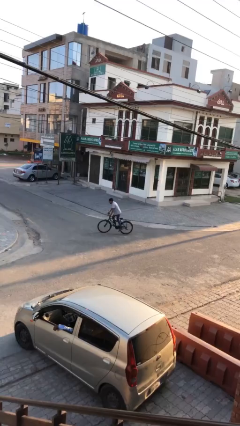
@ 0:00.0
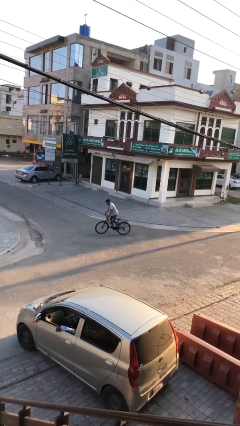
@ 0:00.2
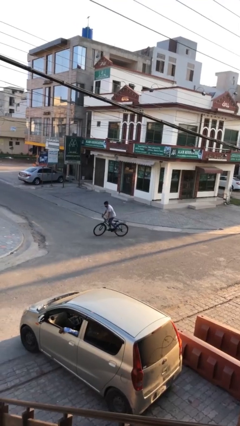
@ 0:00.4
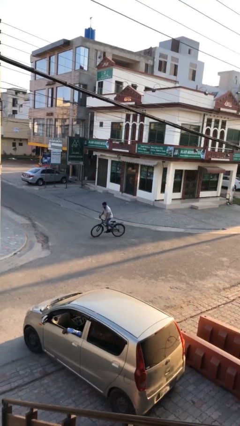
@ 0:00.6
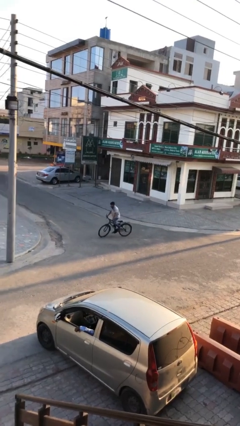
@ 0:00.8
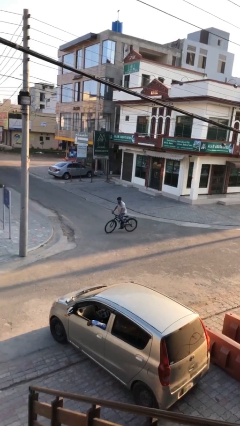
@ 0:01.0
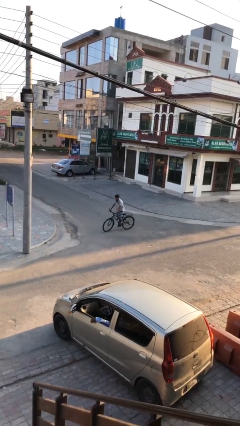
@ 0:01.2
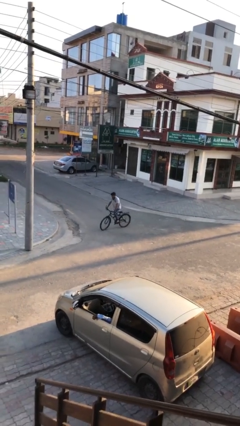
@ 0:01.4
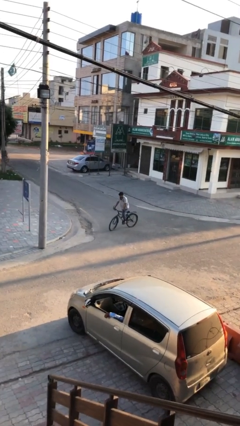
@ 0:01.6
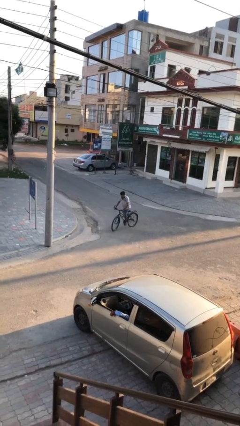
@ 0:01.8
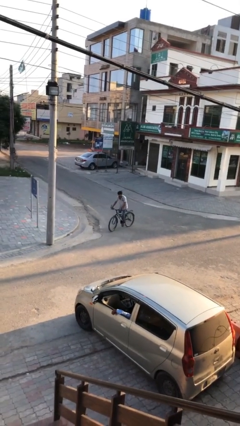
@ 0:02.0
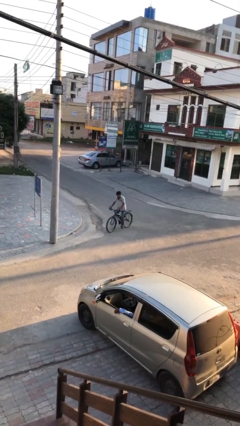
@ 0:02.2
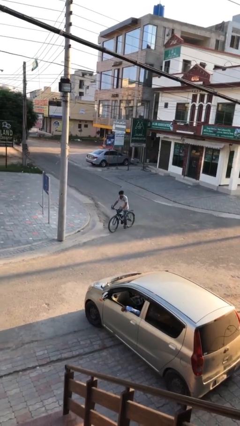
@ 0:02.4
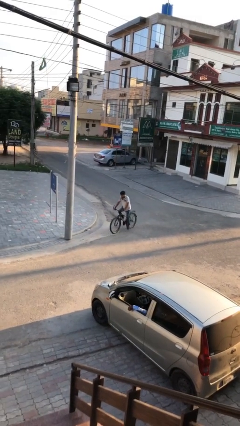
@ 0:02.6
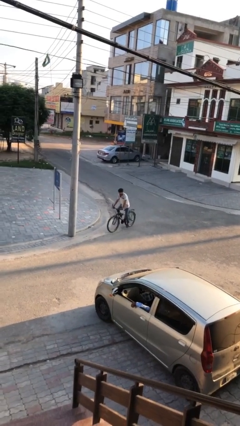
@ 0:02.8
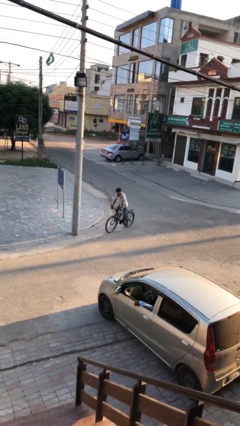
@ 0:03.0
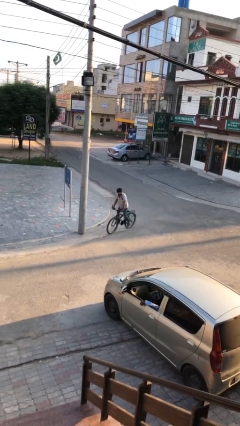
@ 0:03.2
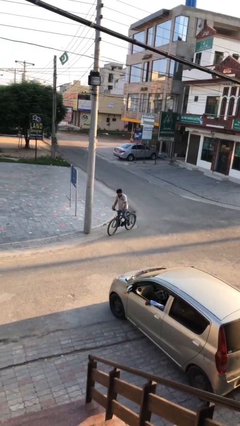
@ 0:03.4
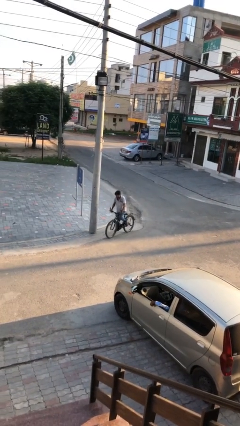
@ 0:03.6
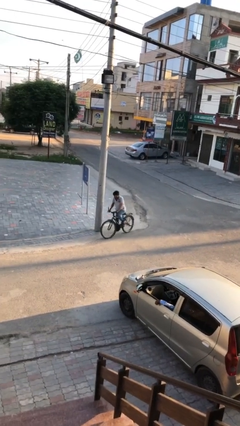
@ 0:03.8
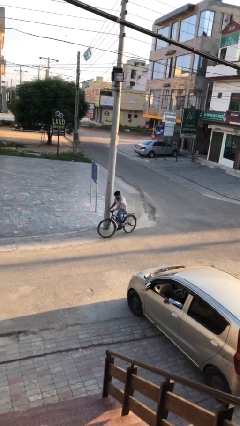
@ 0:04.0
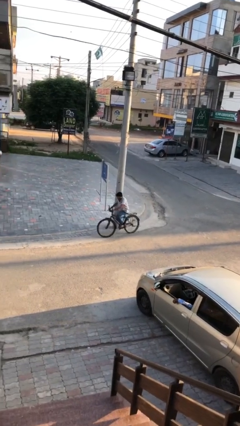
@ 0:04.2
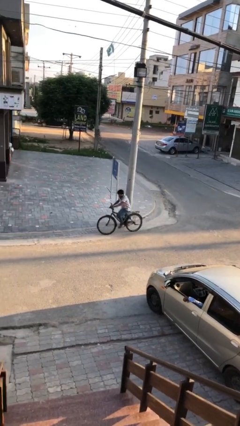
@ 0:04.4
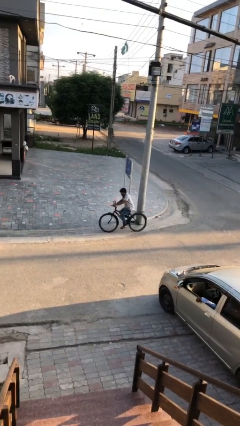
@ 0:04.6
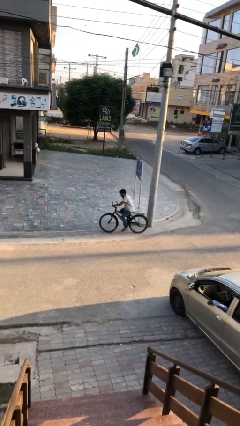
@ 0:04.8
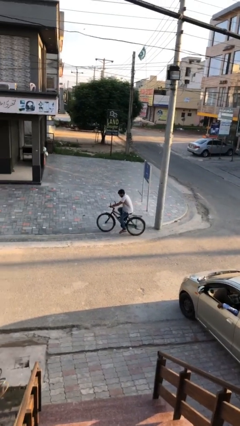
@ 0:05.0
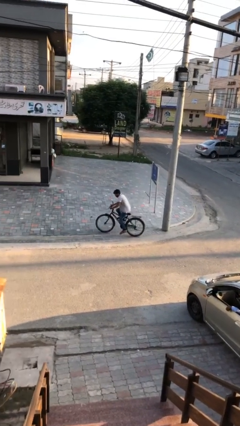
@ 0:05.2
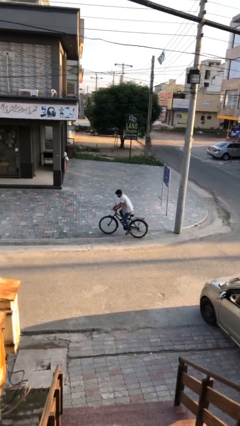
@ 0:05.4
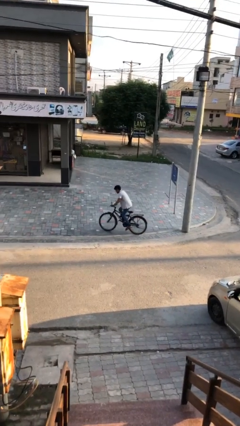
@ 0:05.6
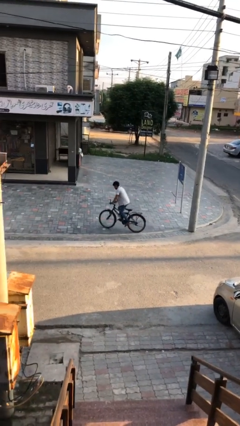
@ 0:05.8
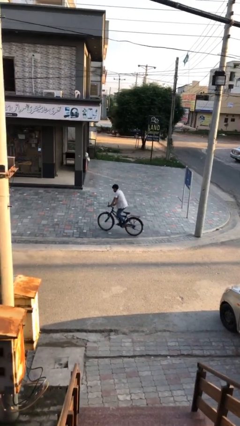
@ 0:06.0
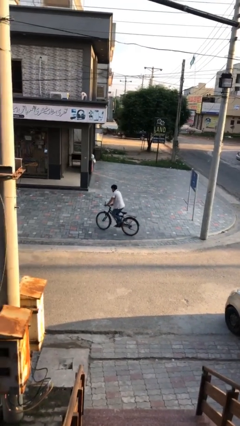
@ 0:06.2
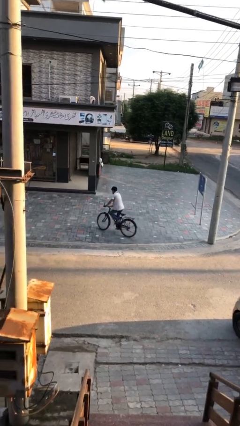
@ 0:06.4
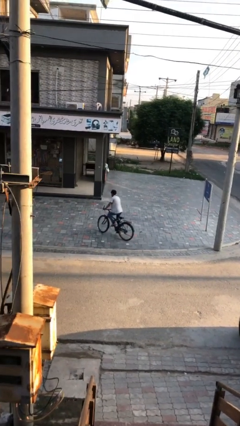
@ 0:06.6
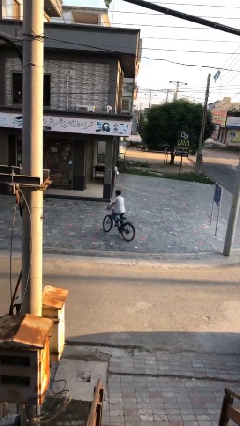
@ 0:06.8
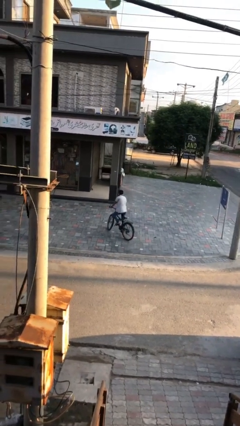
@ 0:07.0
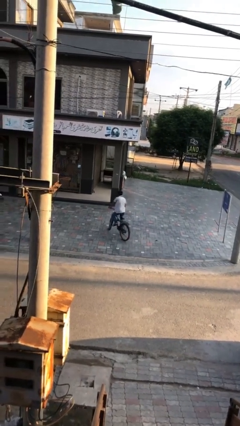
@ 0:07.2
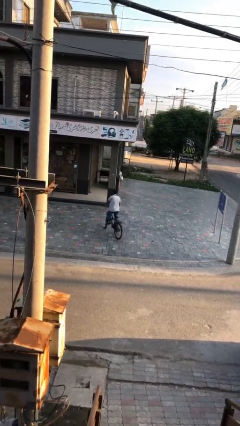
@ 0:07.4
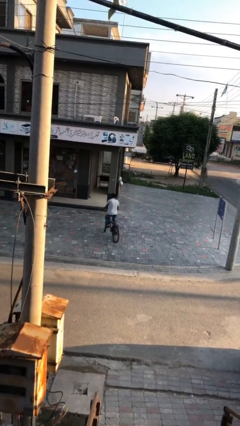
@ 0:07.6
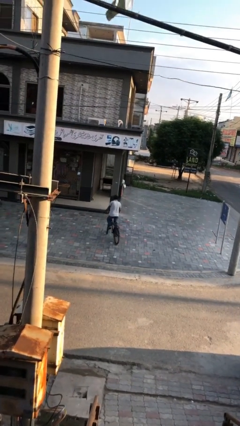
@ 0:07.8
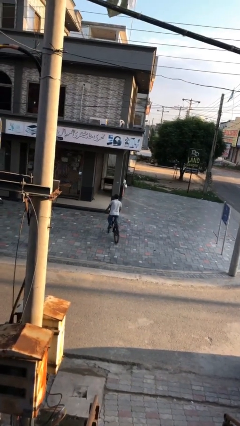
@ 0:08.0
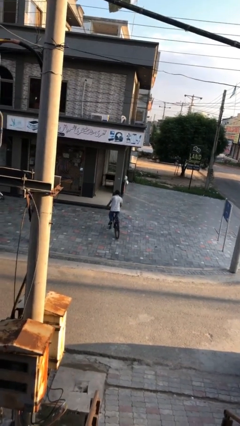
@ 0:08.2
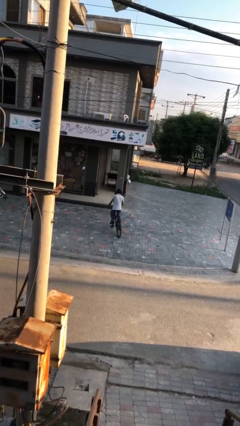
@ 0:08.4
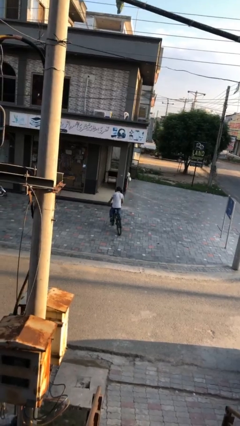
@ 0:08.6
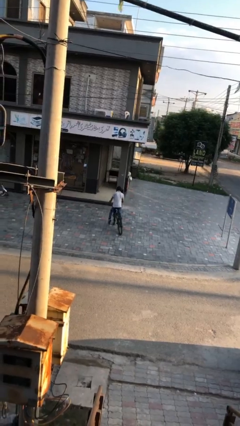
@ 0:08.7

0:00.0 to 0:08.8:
person rides bicycle

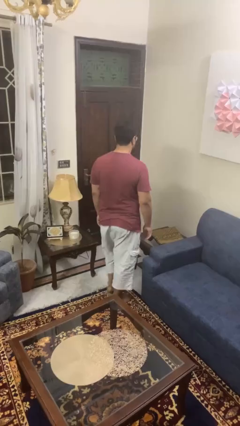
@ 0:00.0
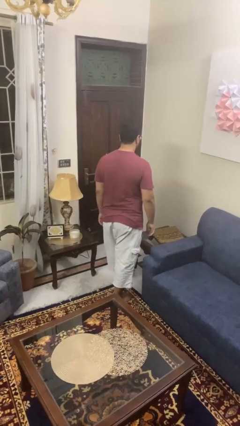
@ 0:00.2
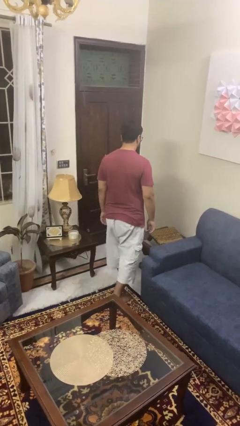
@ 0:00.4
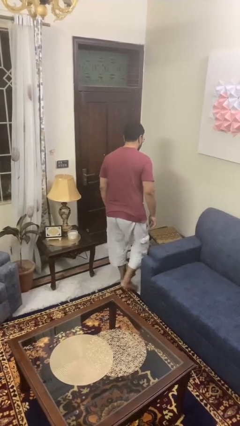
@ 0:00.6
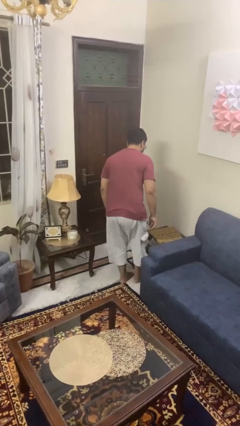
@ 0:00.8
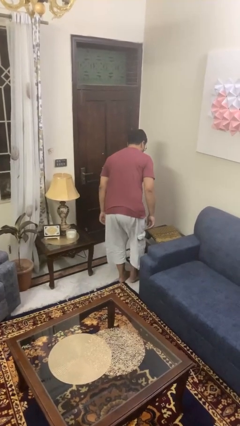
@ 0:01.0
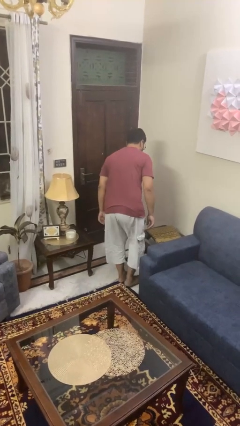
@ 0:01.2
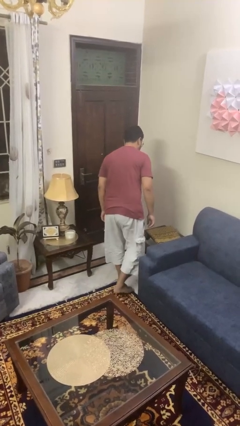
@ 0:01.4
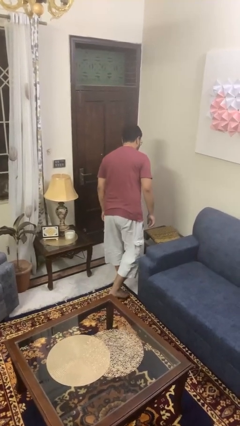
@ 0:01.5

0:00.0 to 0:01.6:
person bumps into table

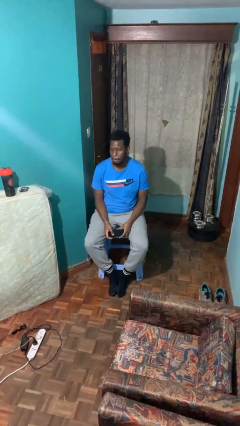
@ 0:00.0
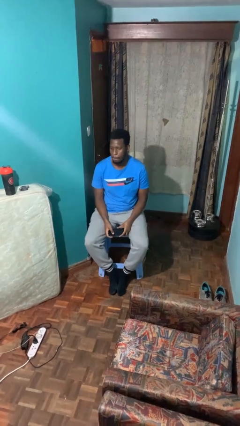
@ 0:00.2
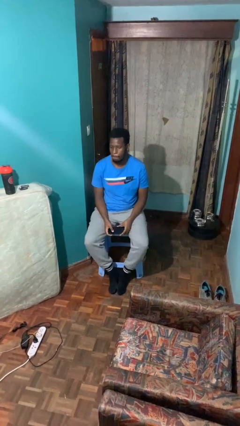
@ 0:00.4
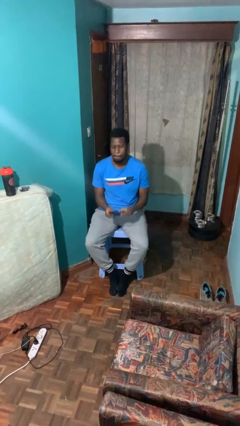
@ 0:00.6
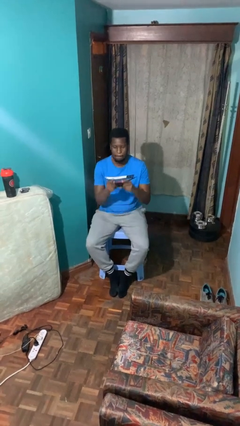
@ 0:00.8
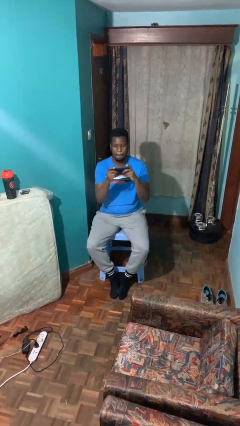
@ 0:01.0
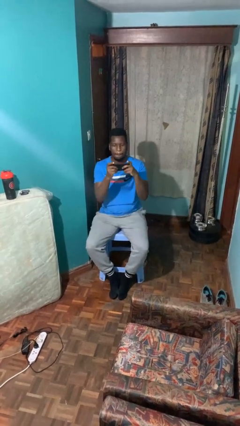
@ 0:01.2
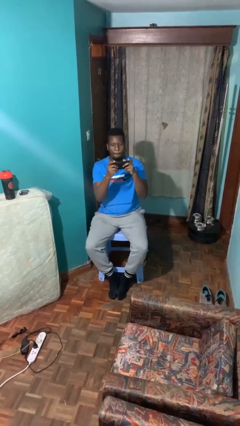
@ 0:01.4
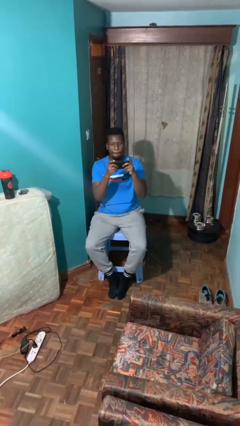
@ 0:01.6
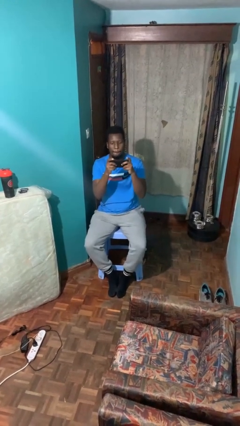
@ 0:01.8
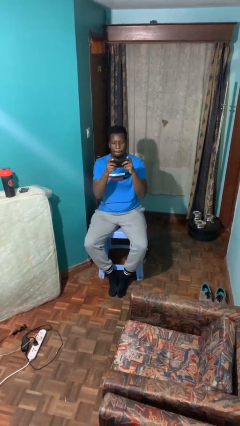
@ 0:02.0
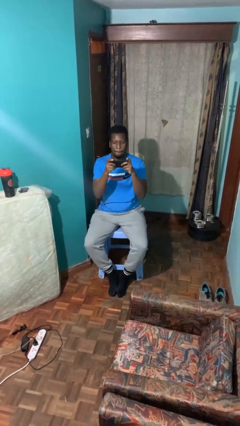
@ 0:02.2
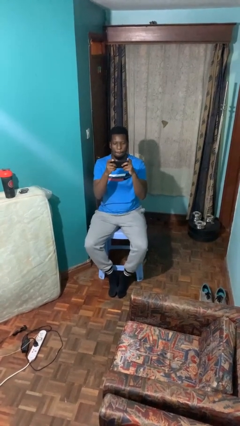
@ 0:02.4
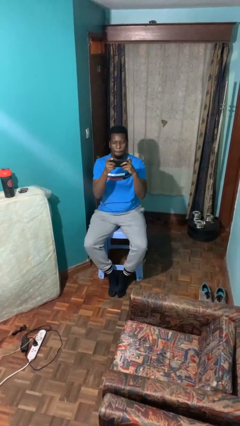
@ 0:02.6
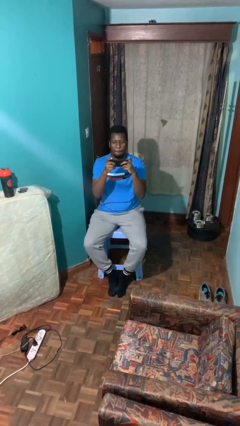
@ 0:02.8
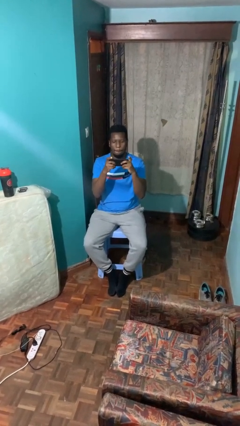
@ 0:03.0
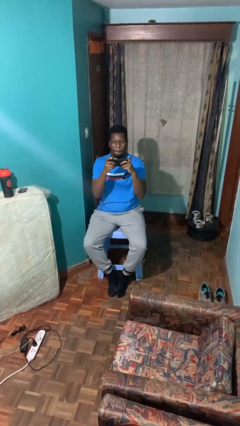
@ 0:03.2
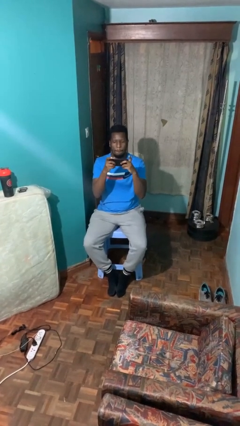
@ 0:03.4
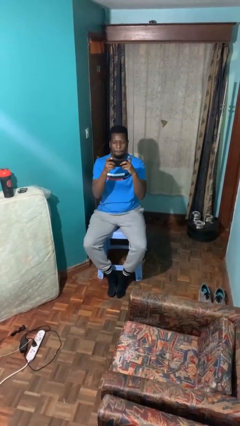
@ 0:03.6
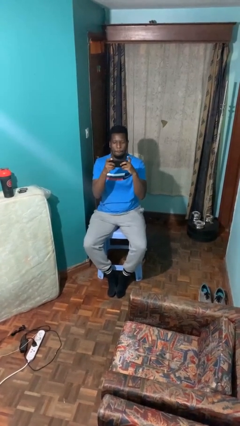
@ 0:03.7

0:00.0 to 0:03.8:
person interacts with handheld game

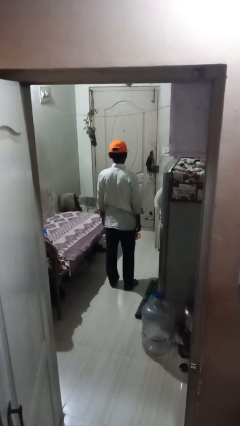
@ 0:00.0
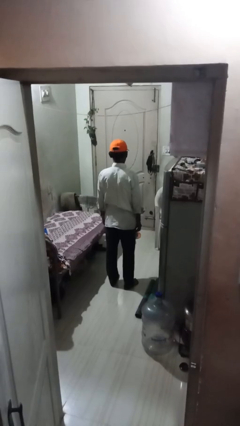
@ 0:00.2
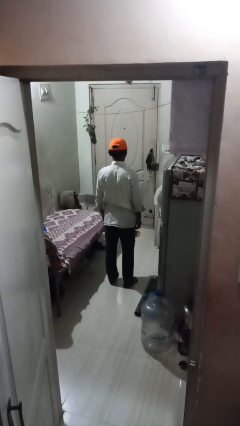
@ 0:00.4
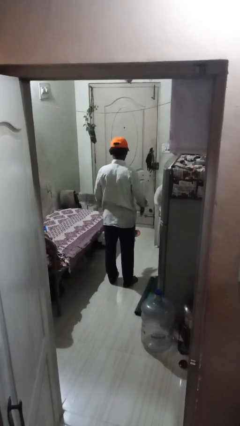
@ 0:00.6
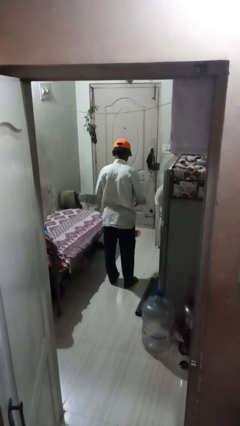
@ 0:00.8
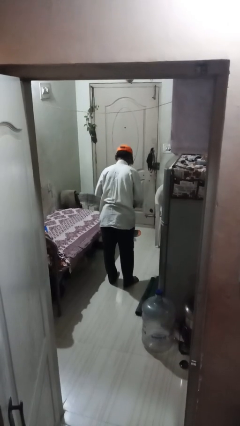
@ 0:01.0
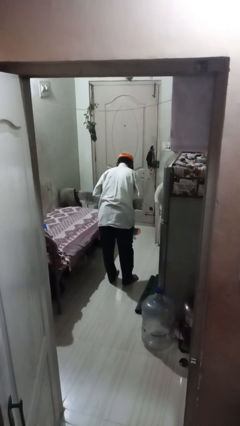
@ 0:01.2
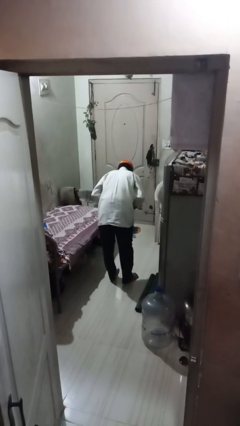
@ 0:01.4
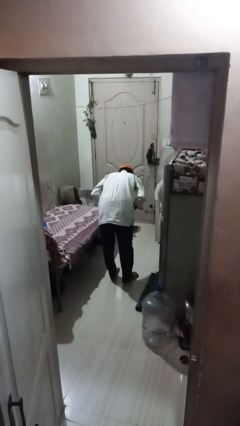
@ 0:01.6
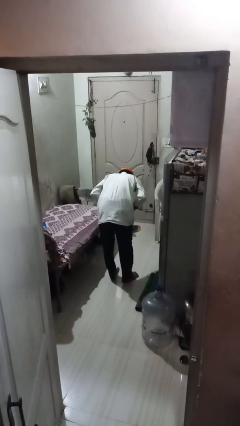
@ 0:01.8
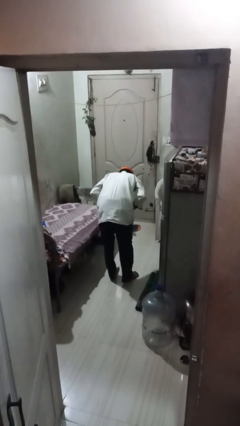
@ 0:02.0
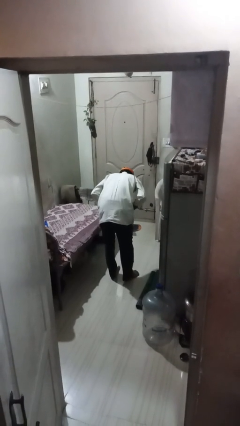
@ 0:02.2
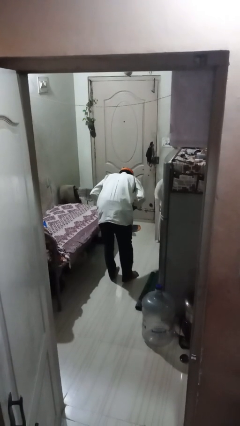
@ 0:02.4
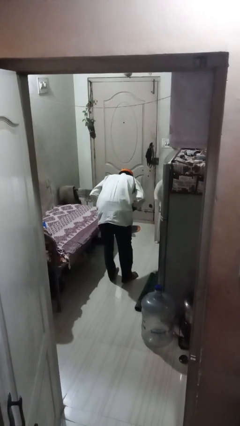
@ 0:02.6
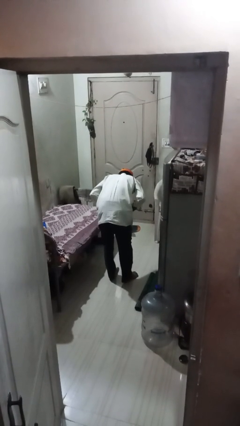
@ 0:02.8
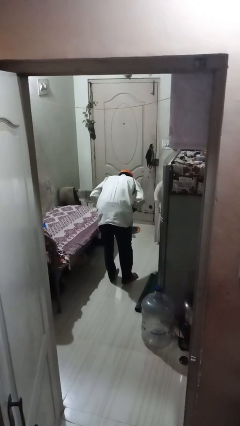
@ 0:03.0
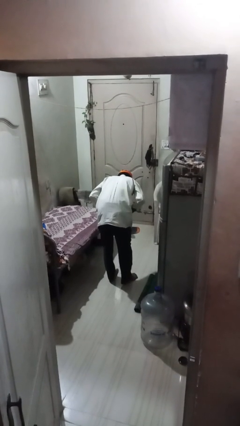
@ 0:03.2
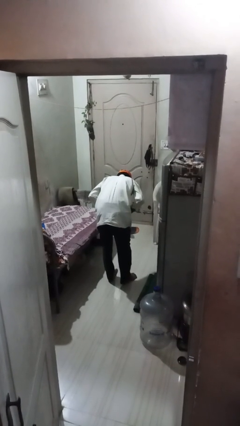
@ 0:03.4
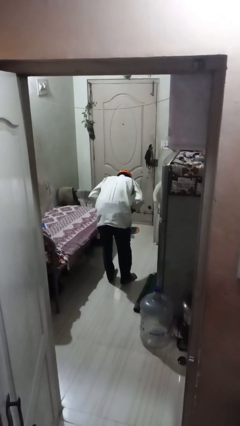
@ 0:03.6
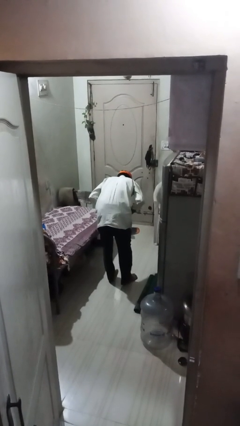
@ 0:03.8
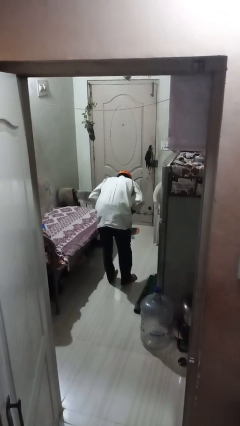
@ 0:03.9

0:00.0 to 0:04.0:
person bows
